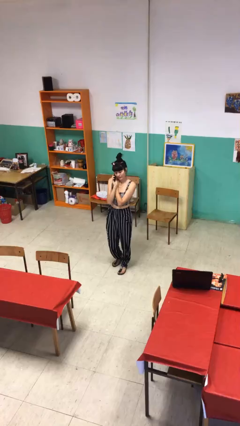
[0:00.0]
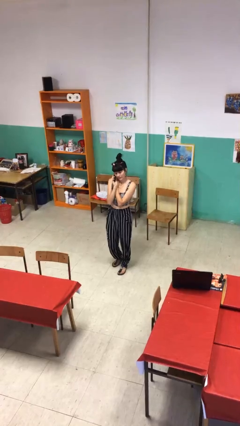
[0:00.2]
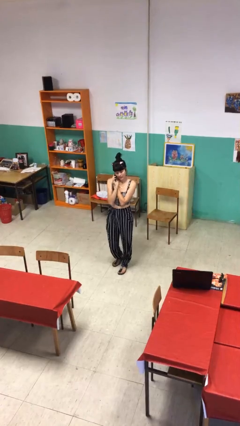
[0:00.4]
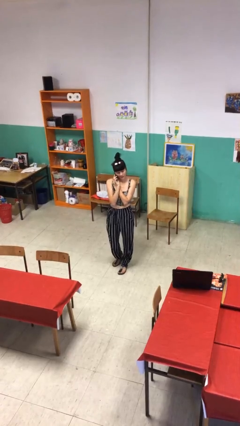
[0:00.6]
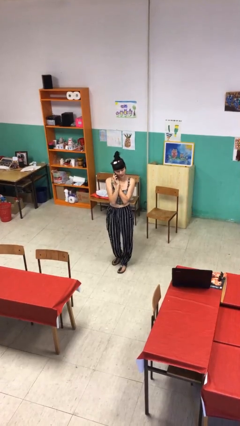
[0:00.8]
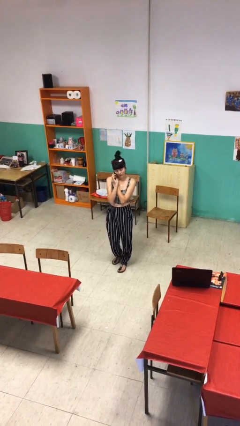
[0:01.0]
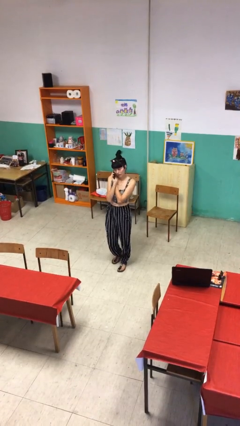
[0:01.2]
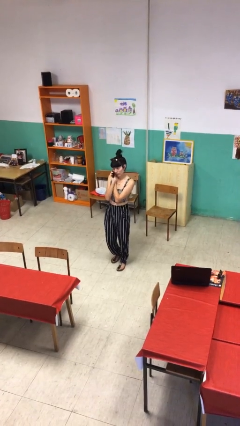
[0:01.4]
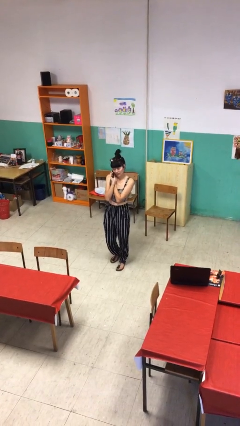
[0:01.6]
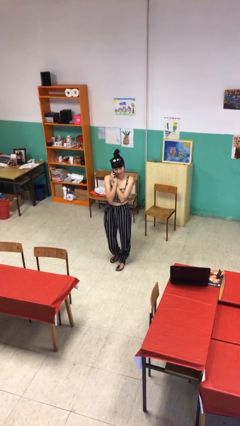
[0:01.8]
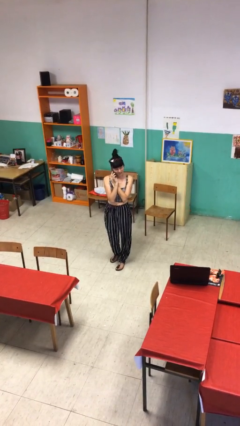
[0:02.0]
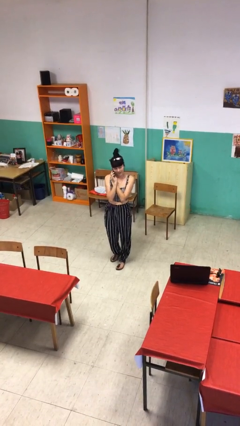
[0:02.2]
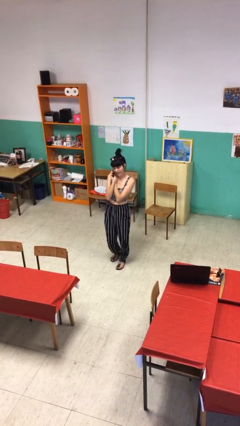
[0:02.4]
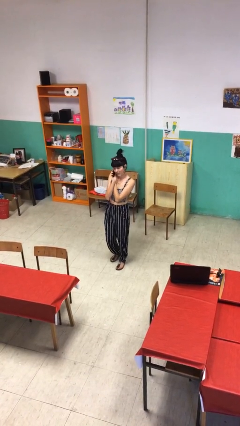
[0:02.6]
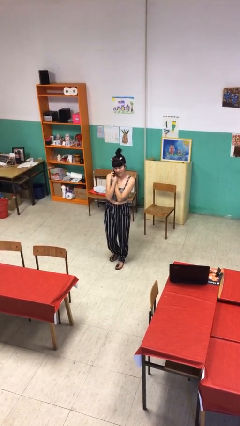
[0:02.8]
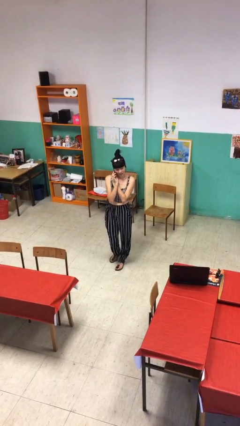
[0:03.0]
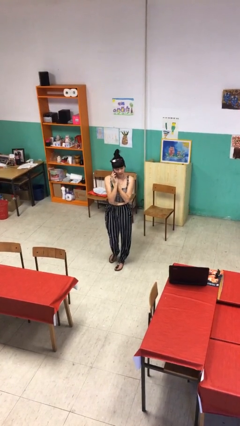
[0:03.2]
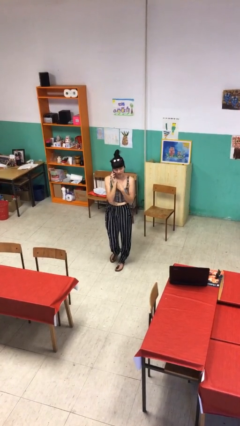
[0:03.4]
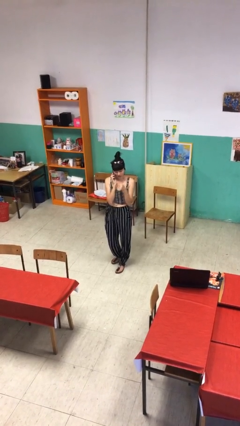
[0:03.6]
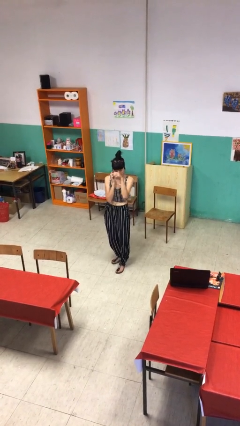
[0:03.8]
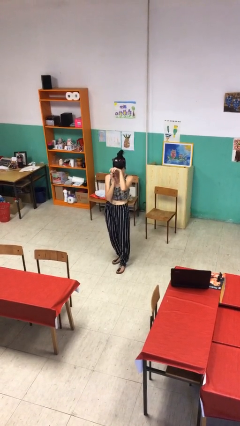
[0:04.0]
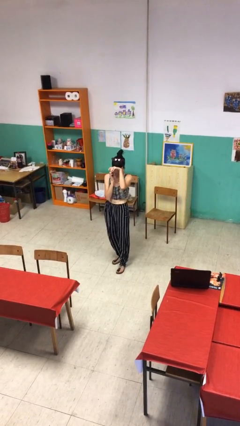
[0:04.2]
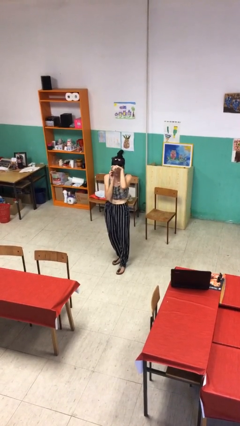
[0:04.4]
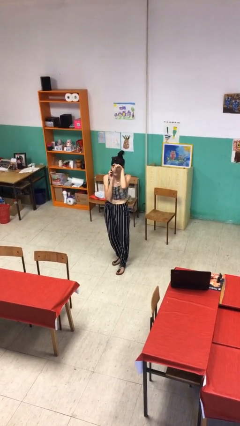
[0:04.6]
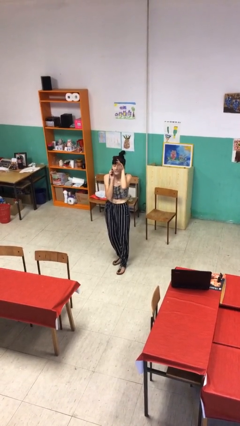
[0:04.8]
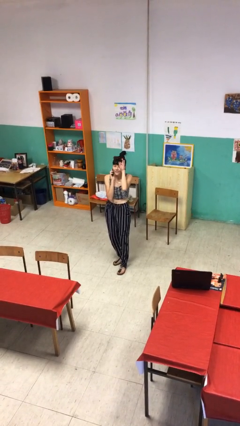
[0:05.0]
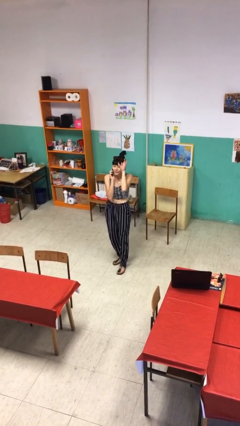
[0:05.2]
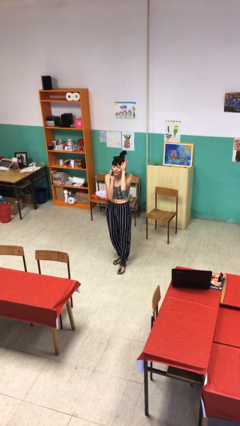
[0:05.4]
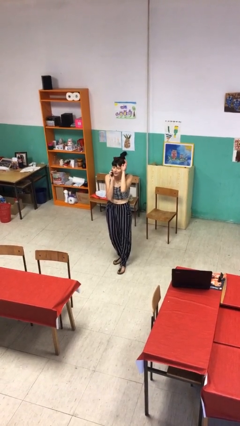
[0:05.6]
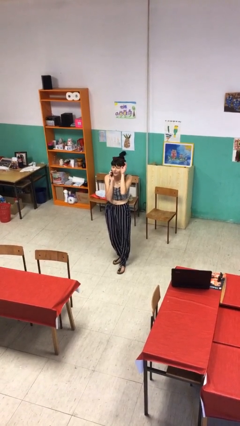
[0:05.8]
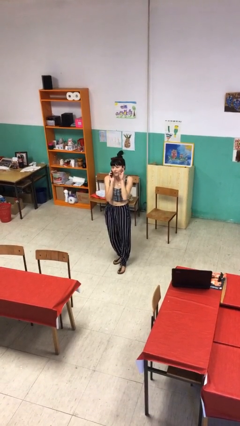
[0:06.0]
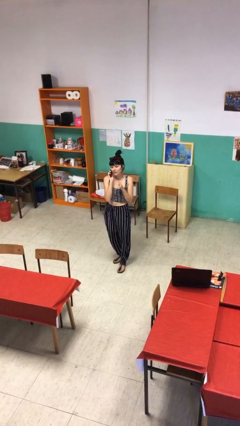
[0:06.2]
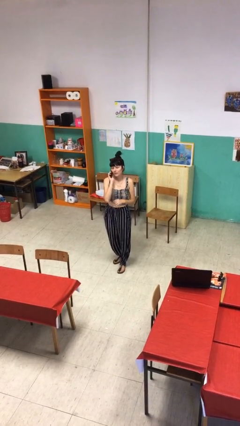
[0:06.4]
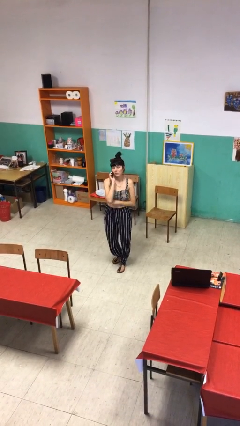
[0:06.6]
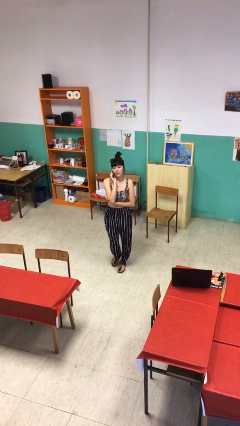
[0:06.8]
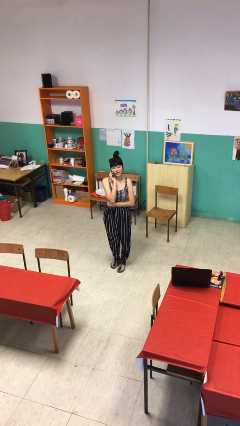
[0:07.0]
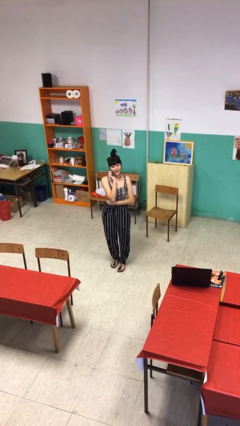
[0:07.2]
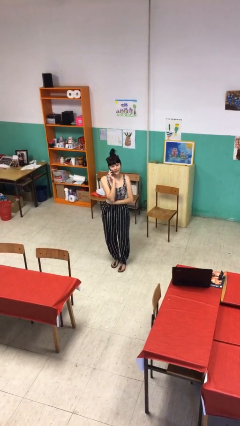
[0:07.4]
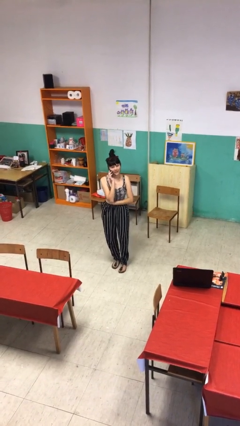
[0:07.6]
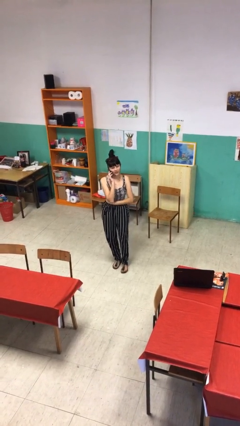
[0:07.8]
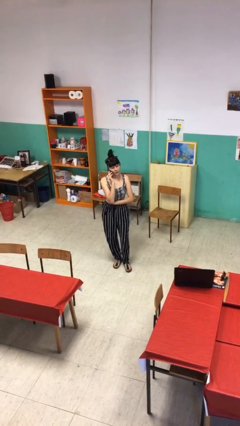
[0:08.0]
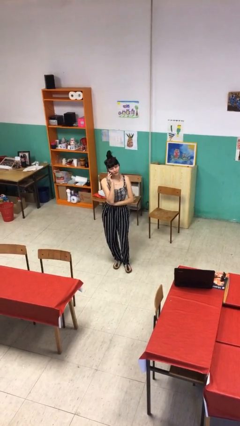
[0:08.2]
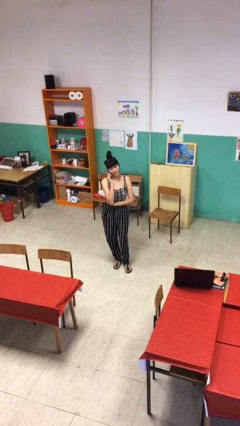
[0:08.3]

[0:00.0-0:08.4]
person talks on phone

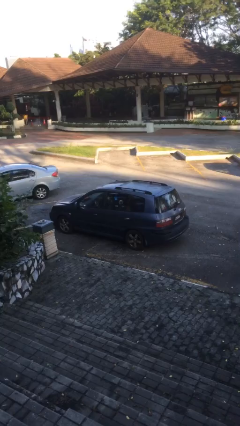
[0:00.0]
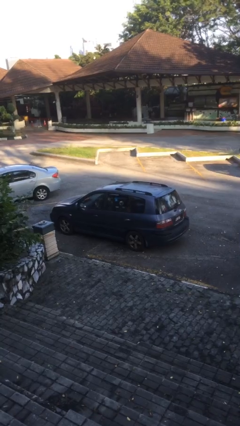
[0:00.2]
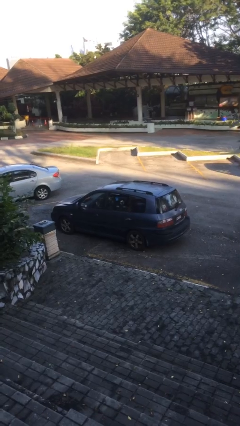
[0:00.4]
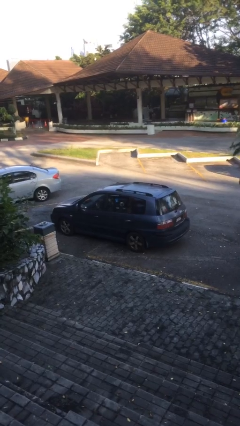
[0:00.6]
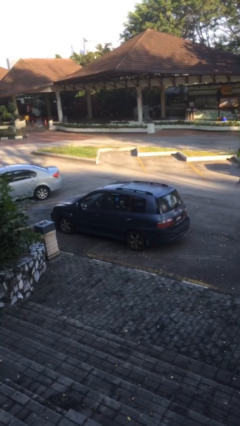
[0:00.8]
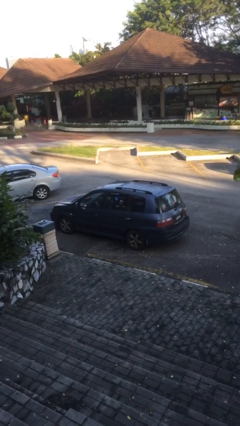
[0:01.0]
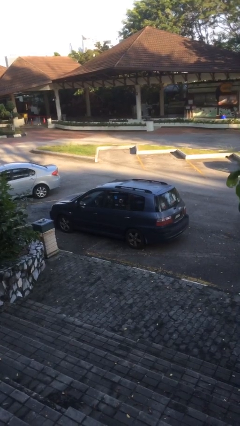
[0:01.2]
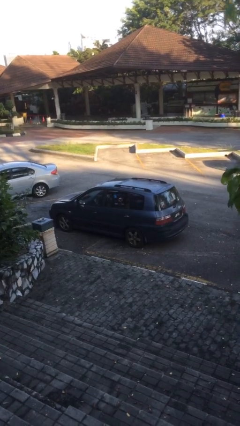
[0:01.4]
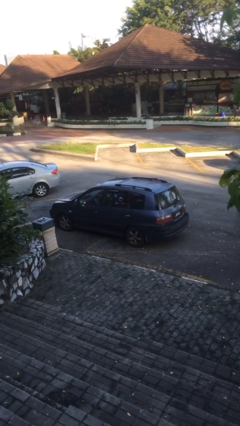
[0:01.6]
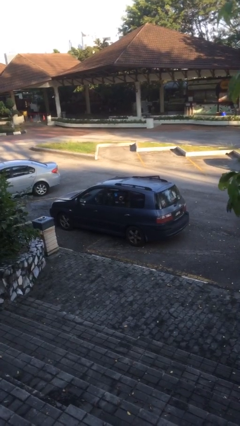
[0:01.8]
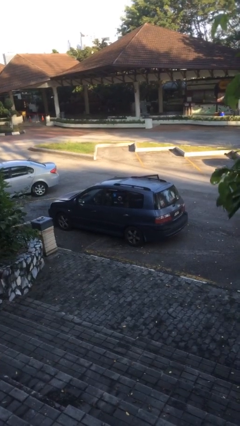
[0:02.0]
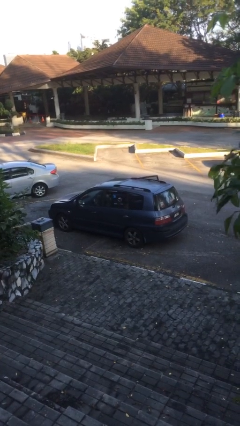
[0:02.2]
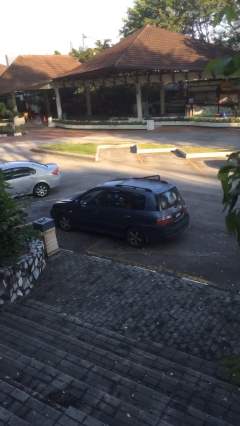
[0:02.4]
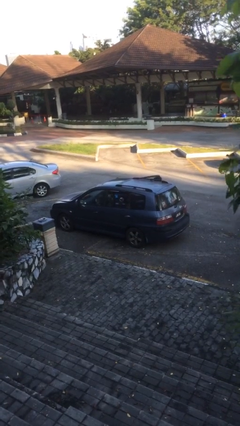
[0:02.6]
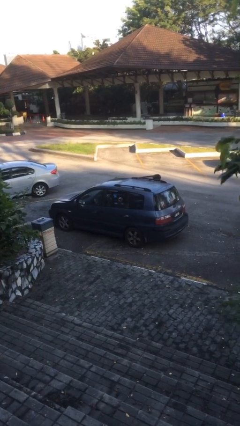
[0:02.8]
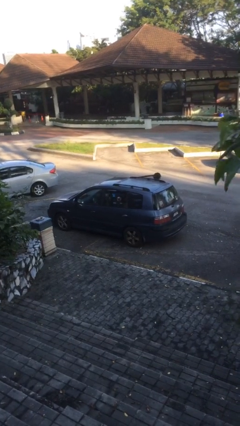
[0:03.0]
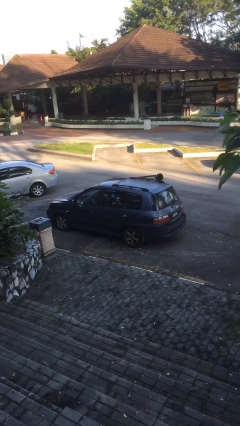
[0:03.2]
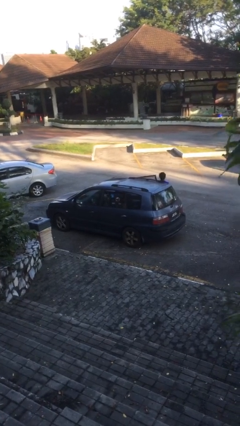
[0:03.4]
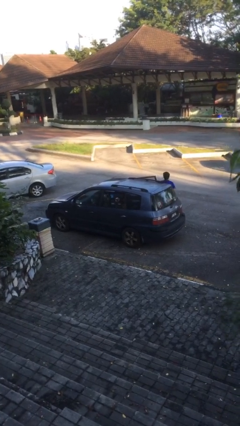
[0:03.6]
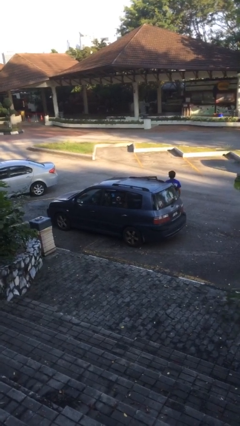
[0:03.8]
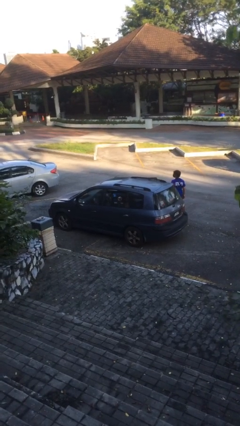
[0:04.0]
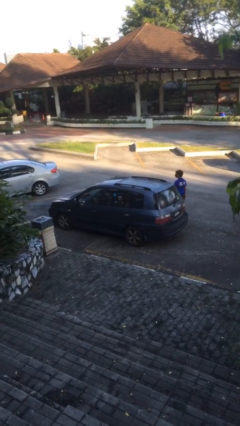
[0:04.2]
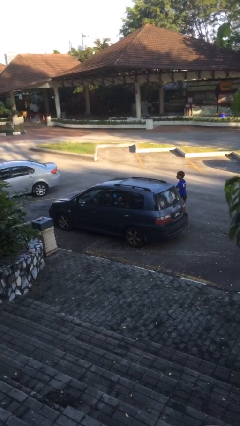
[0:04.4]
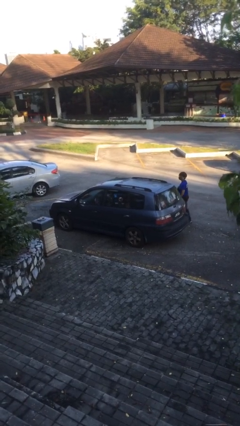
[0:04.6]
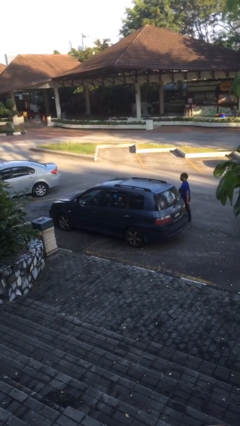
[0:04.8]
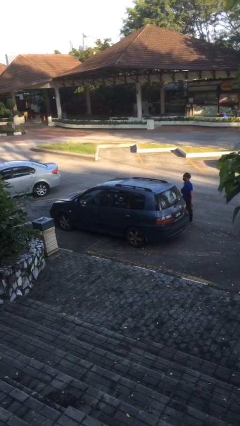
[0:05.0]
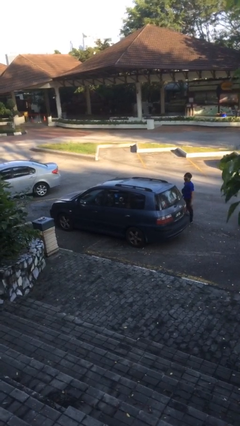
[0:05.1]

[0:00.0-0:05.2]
car drops off person

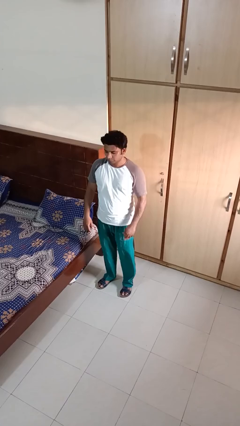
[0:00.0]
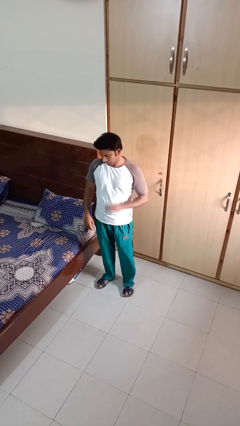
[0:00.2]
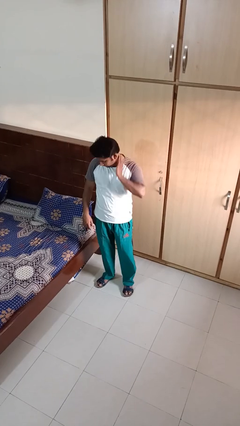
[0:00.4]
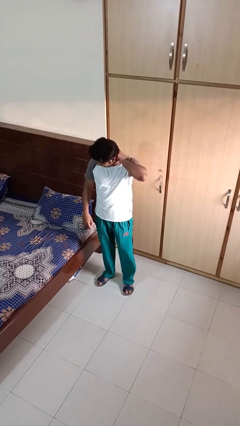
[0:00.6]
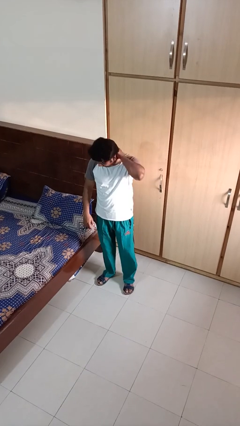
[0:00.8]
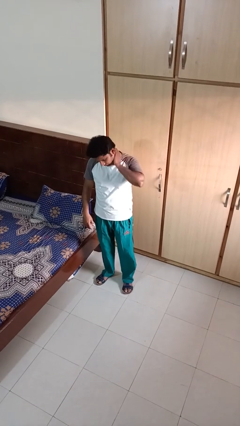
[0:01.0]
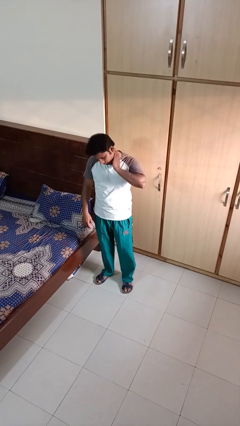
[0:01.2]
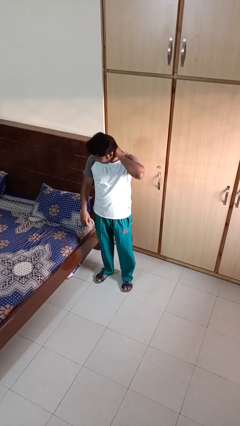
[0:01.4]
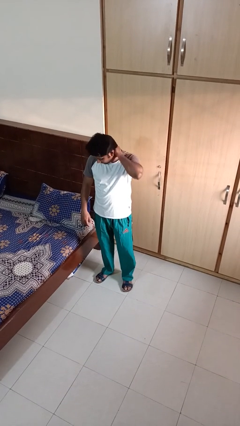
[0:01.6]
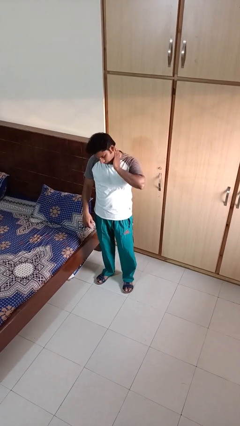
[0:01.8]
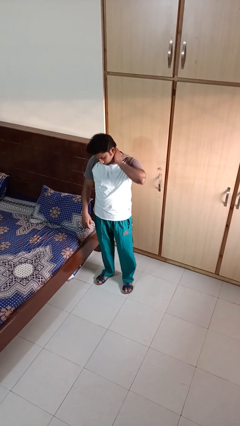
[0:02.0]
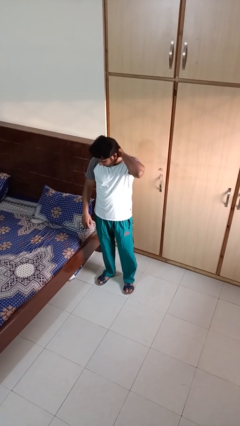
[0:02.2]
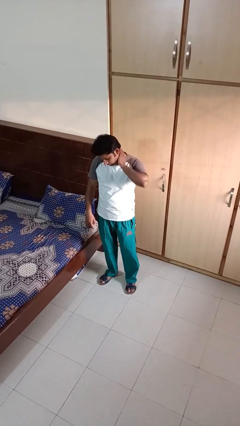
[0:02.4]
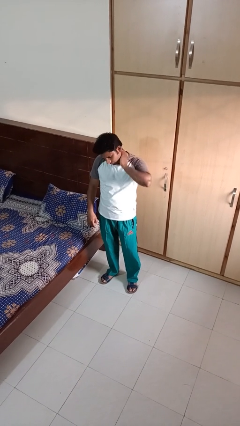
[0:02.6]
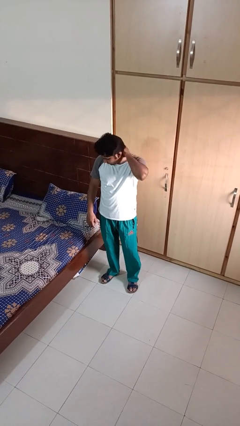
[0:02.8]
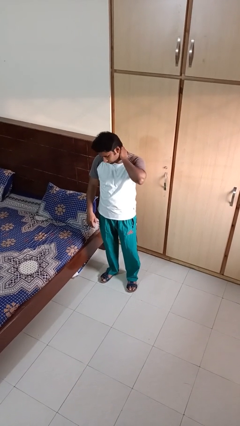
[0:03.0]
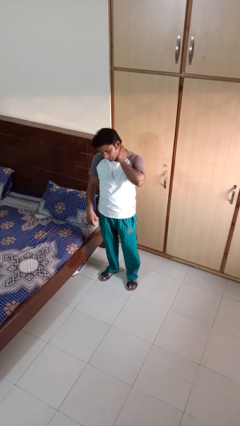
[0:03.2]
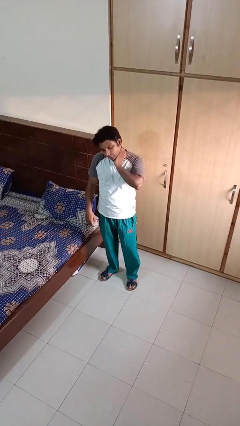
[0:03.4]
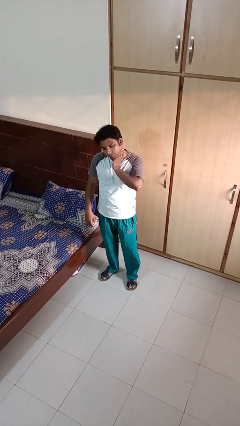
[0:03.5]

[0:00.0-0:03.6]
person rubs neck

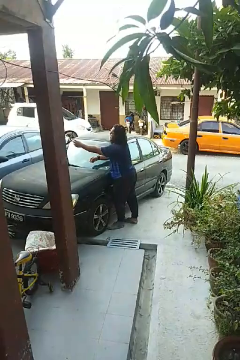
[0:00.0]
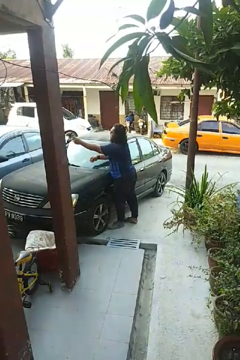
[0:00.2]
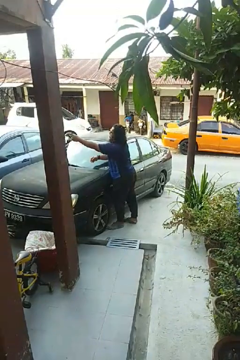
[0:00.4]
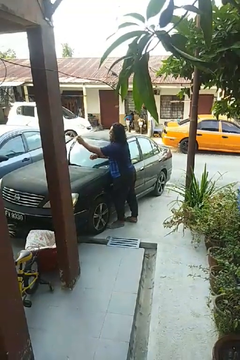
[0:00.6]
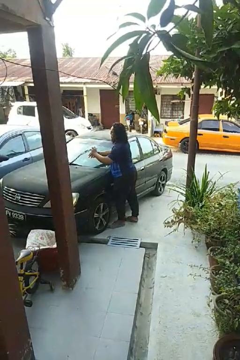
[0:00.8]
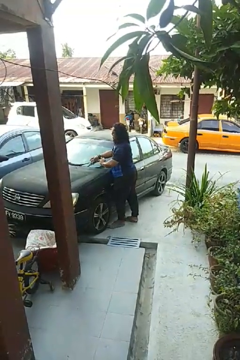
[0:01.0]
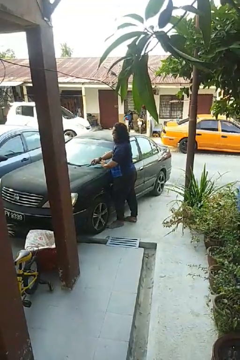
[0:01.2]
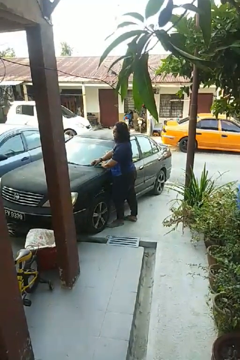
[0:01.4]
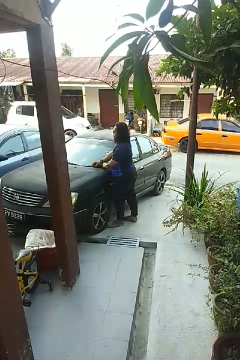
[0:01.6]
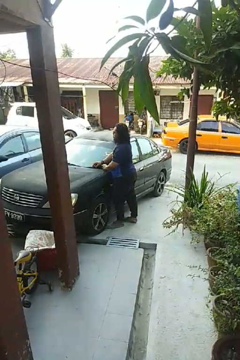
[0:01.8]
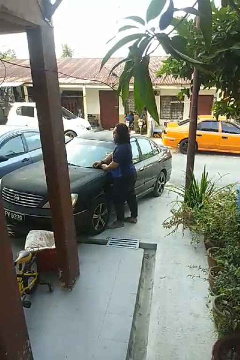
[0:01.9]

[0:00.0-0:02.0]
person flips down car wipers
